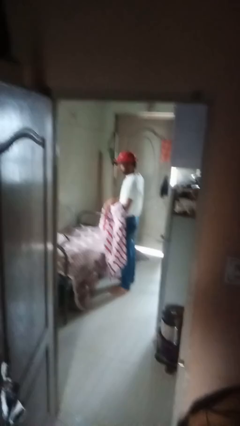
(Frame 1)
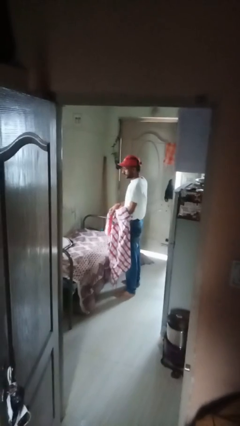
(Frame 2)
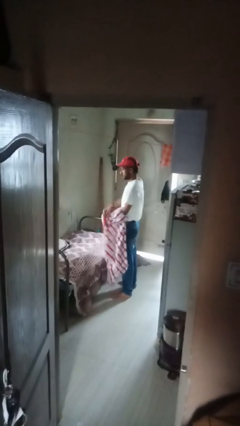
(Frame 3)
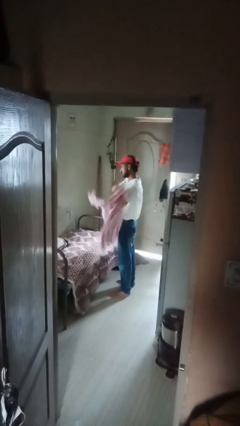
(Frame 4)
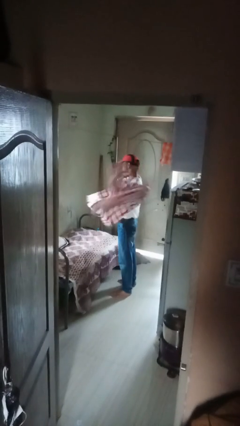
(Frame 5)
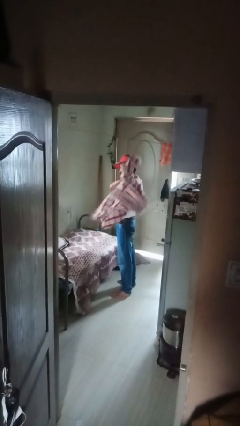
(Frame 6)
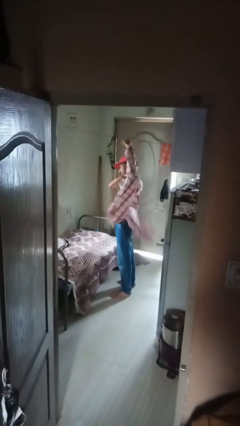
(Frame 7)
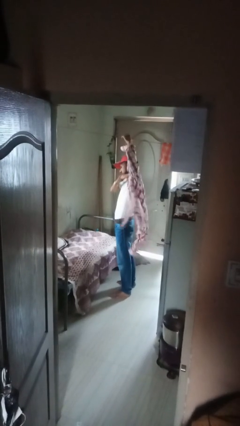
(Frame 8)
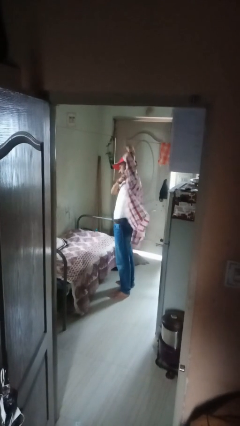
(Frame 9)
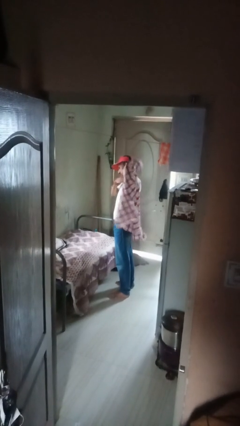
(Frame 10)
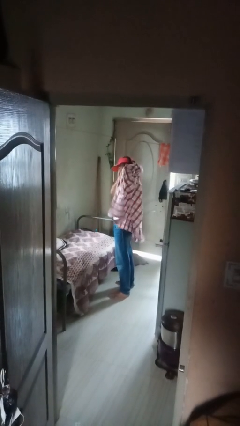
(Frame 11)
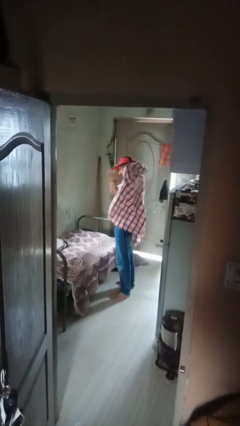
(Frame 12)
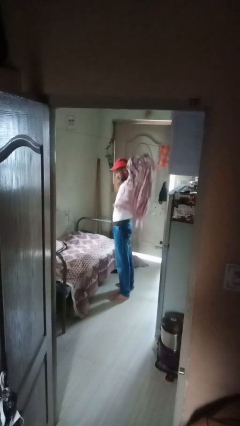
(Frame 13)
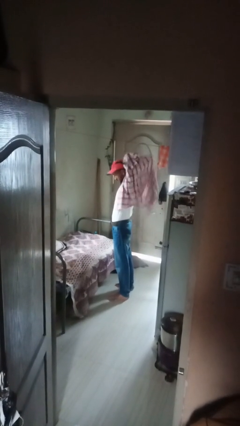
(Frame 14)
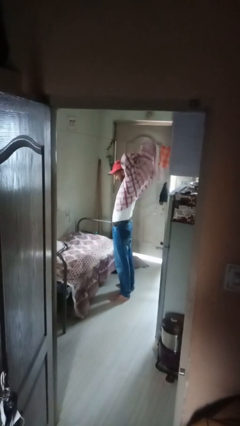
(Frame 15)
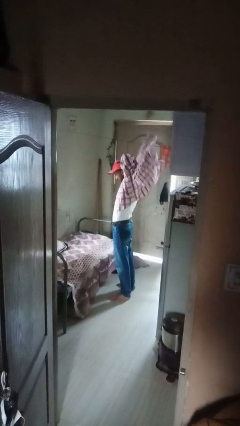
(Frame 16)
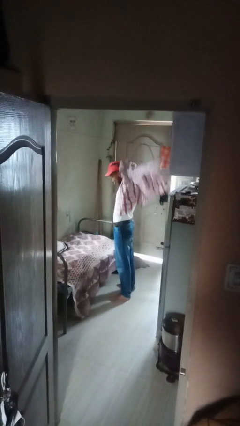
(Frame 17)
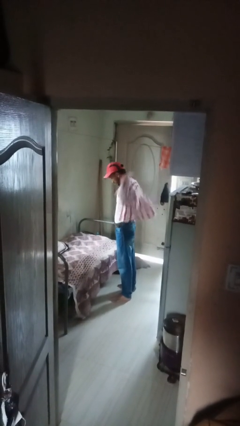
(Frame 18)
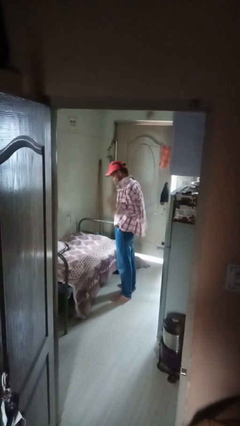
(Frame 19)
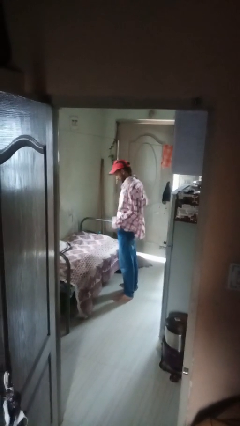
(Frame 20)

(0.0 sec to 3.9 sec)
person puts on shirt

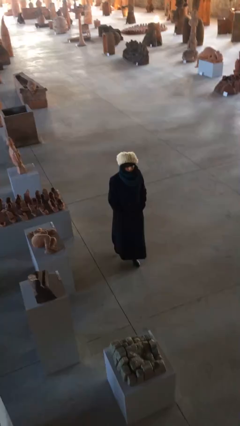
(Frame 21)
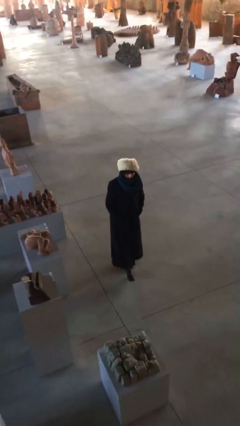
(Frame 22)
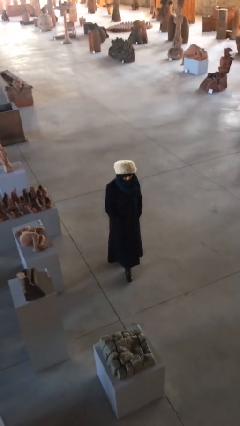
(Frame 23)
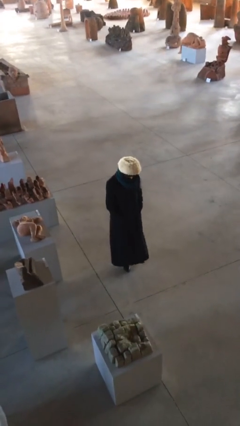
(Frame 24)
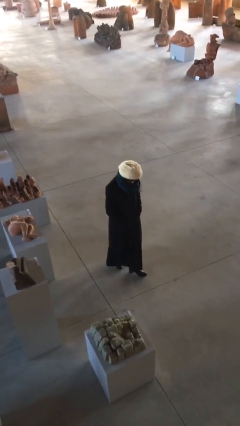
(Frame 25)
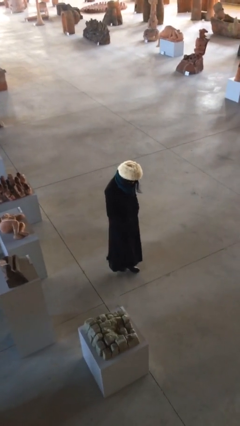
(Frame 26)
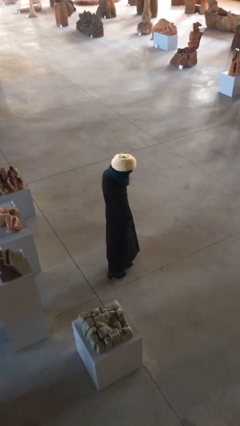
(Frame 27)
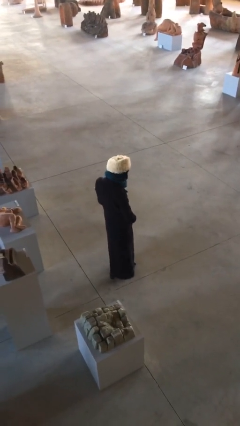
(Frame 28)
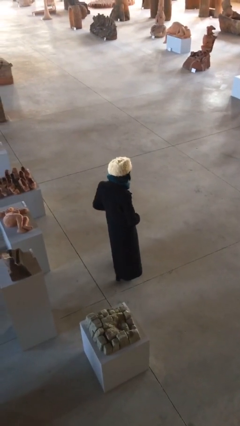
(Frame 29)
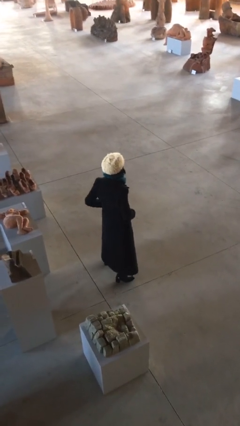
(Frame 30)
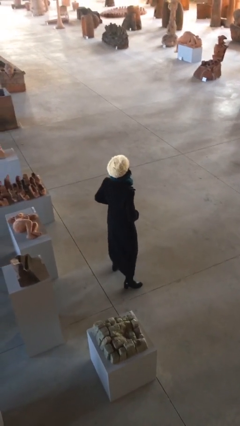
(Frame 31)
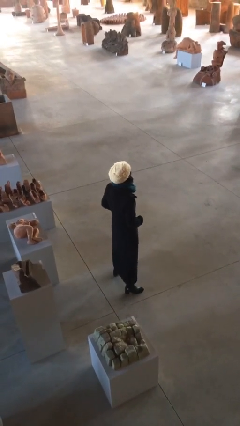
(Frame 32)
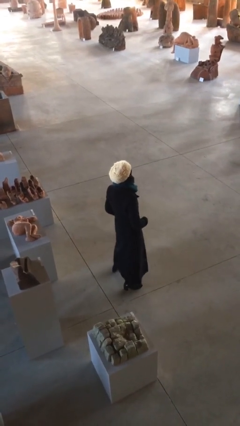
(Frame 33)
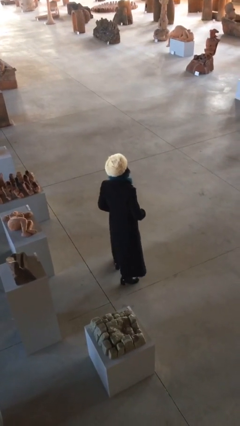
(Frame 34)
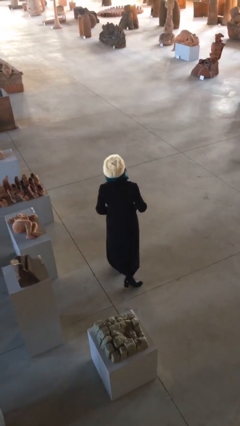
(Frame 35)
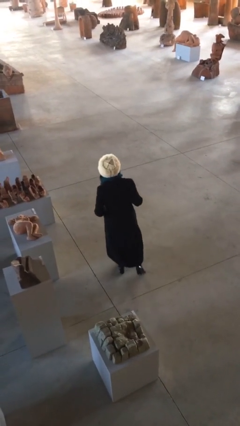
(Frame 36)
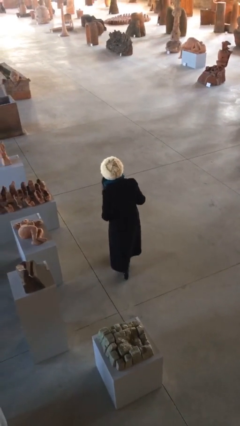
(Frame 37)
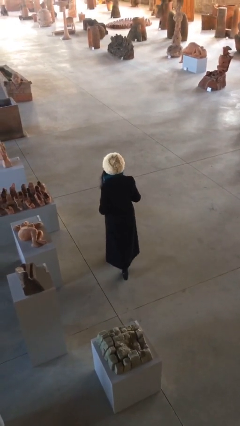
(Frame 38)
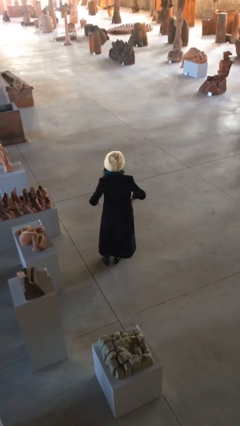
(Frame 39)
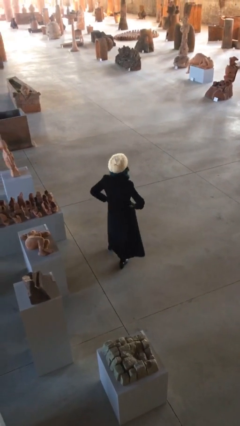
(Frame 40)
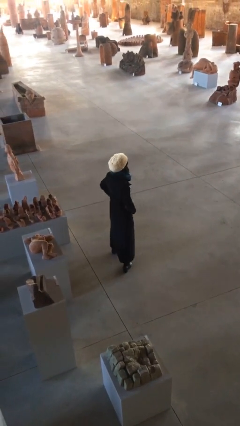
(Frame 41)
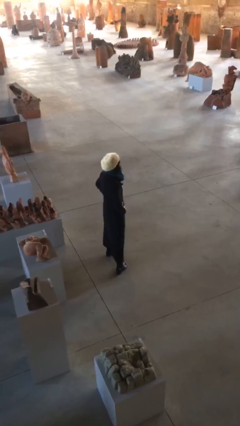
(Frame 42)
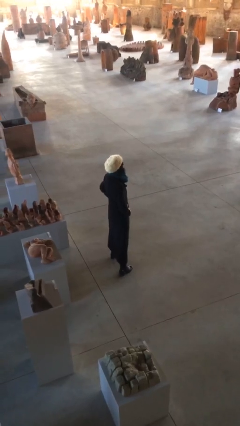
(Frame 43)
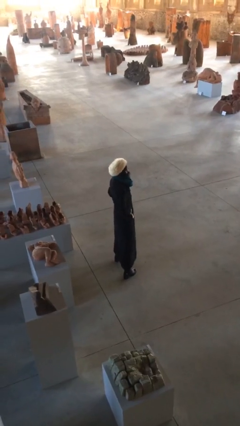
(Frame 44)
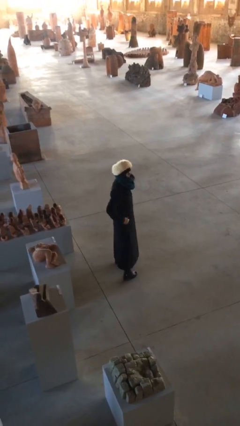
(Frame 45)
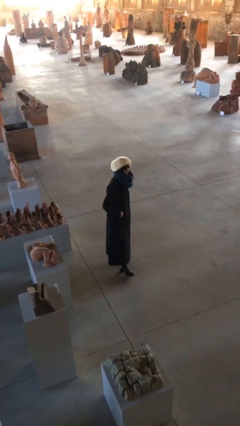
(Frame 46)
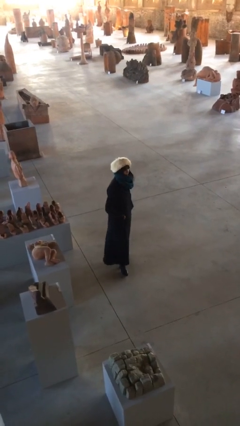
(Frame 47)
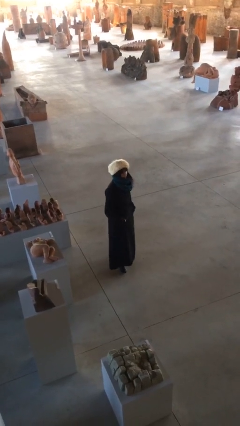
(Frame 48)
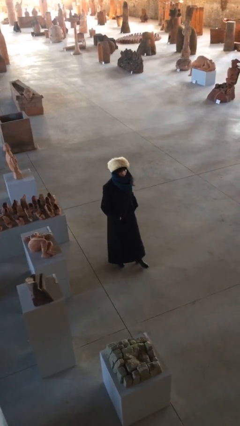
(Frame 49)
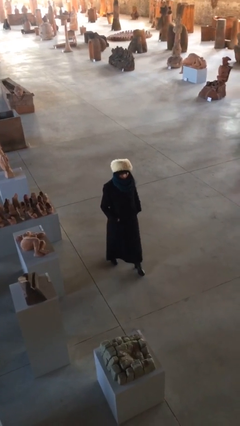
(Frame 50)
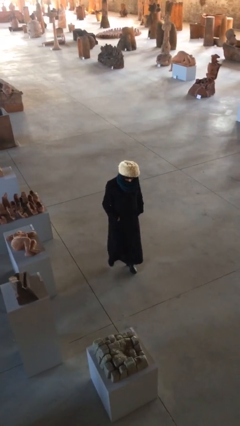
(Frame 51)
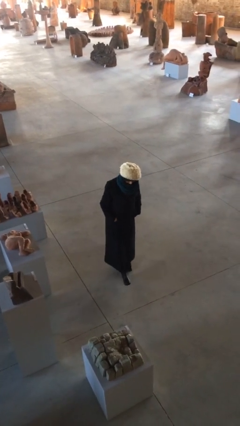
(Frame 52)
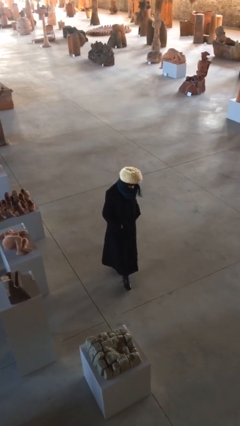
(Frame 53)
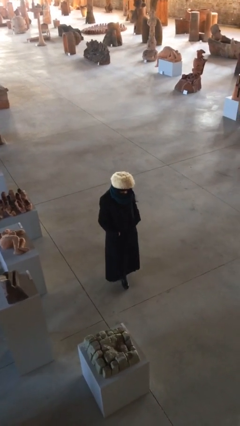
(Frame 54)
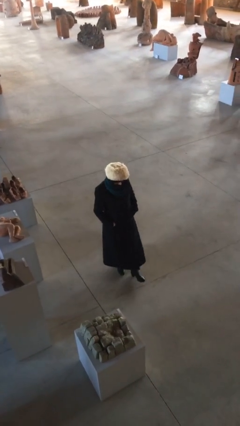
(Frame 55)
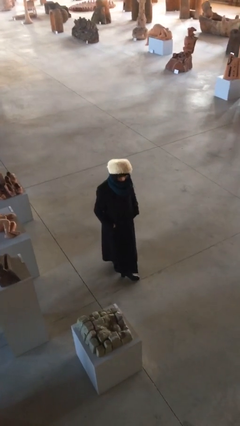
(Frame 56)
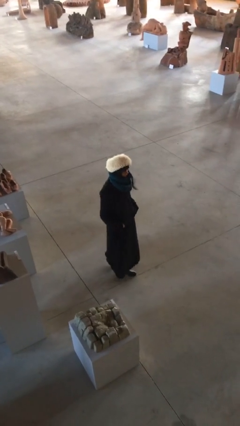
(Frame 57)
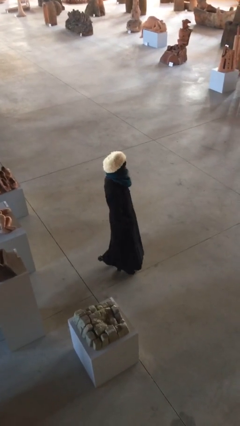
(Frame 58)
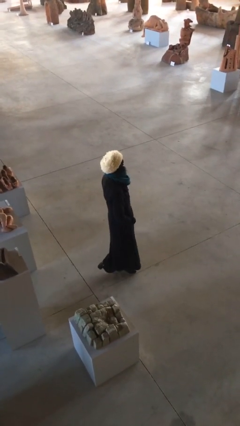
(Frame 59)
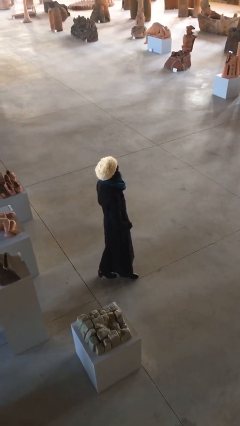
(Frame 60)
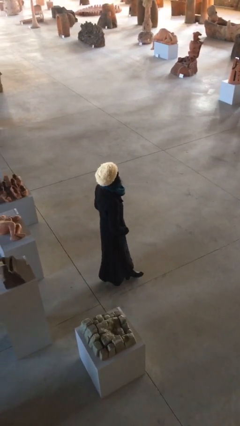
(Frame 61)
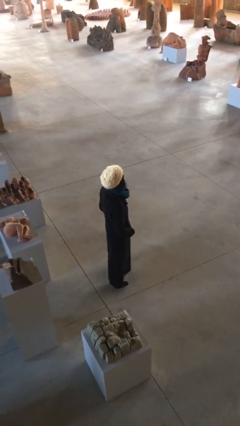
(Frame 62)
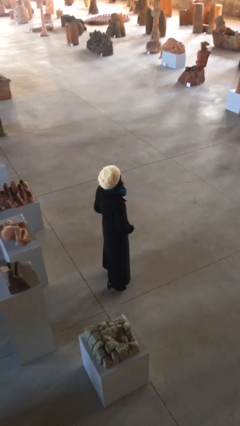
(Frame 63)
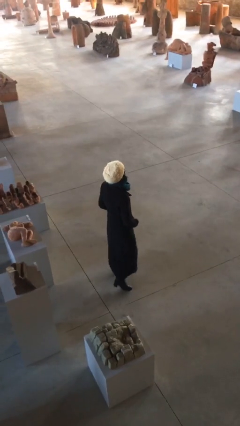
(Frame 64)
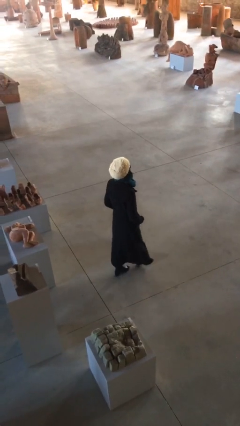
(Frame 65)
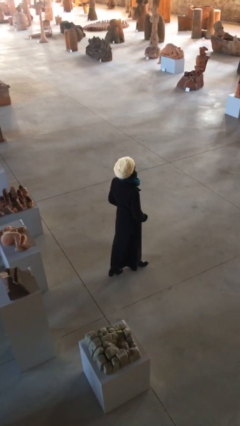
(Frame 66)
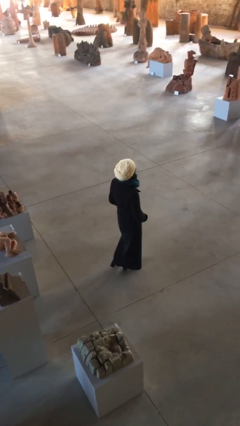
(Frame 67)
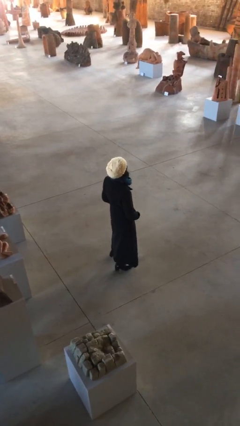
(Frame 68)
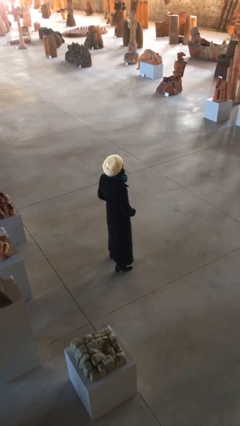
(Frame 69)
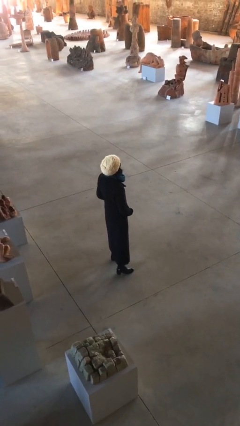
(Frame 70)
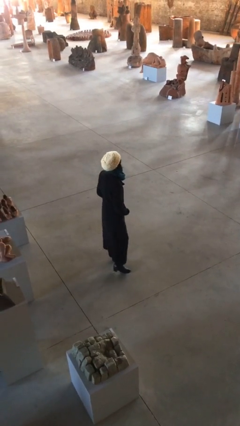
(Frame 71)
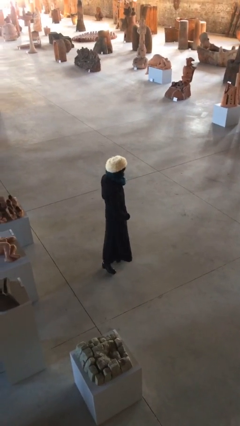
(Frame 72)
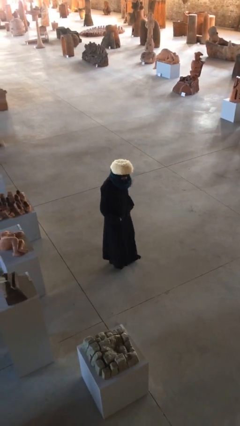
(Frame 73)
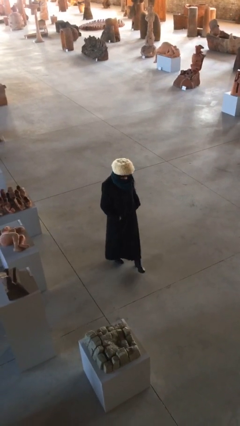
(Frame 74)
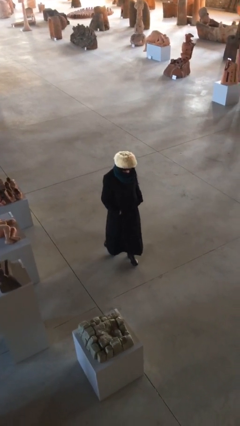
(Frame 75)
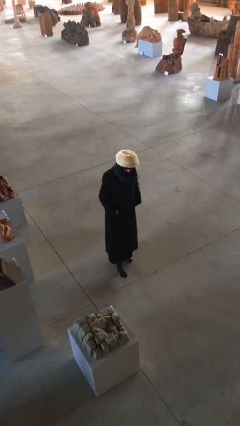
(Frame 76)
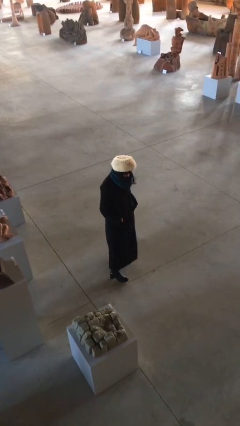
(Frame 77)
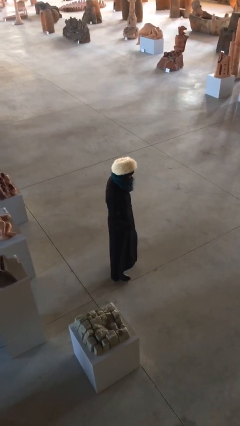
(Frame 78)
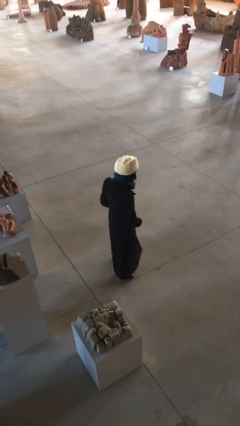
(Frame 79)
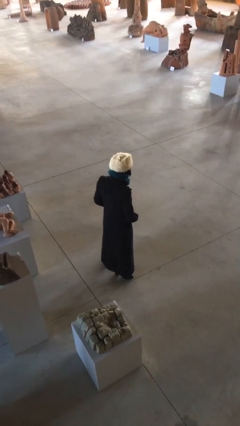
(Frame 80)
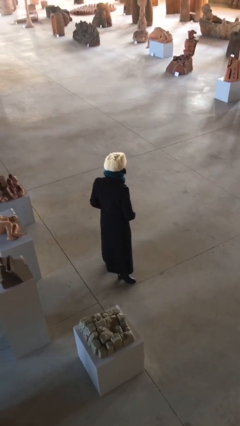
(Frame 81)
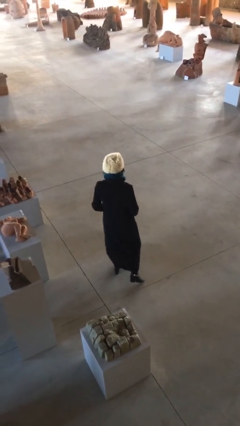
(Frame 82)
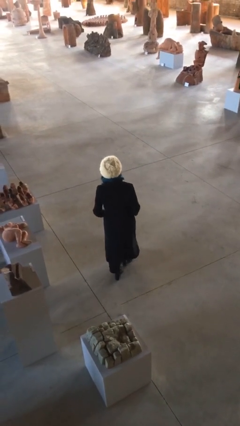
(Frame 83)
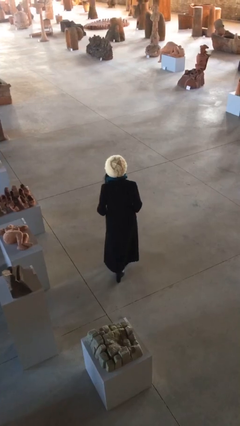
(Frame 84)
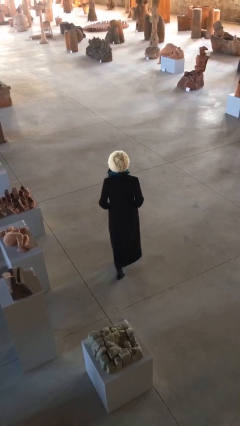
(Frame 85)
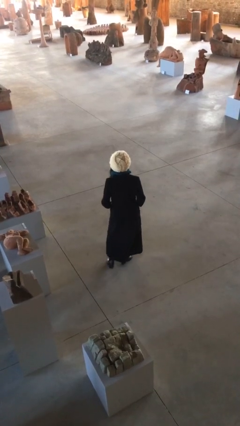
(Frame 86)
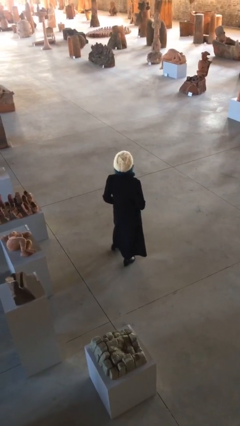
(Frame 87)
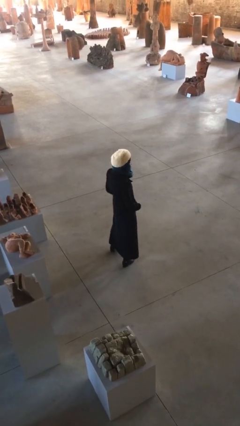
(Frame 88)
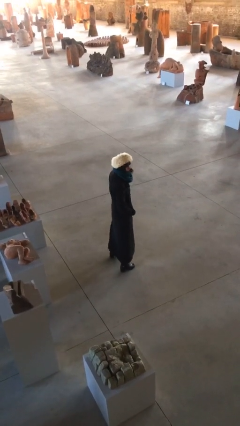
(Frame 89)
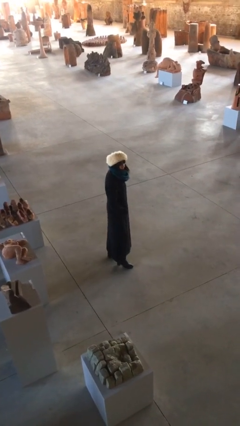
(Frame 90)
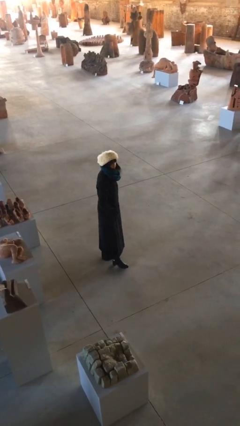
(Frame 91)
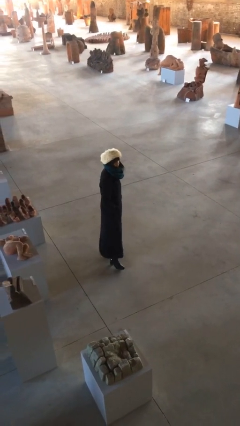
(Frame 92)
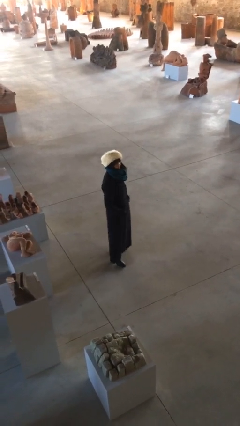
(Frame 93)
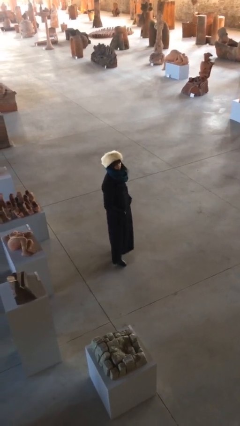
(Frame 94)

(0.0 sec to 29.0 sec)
person walks
